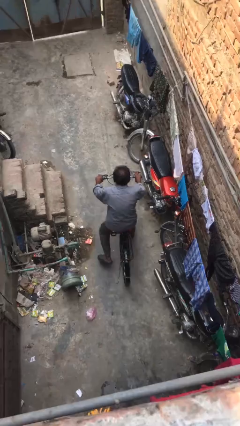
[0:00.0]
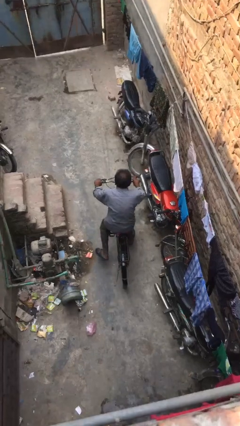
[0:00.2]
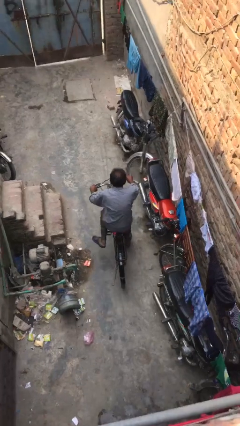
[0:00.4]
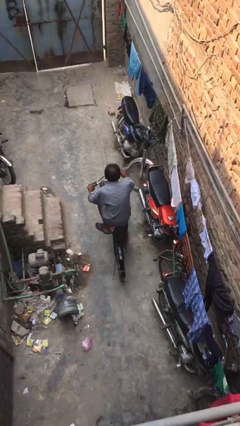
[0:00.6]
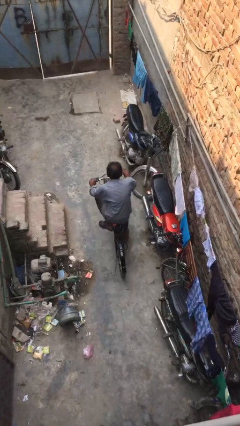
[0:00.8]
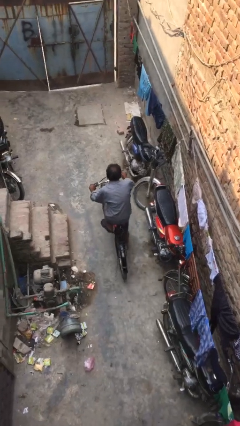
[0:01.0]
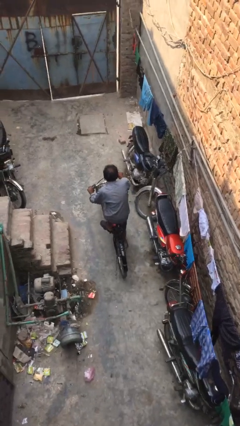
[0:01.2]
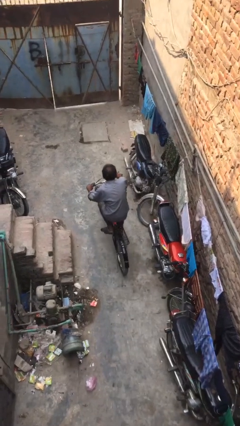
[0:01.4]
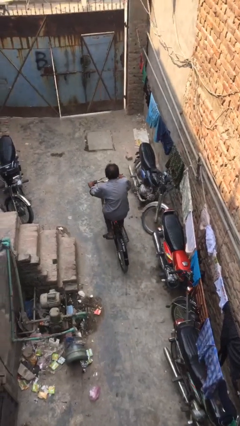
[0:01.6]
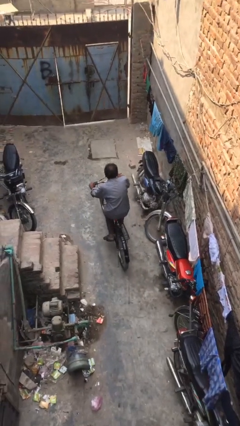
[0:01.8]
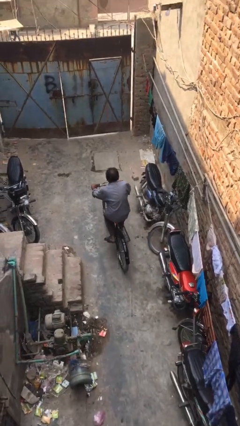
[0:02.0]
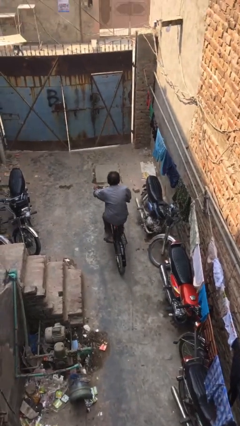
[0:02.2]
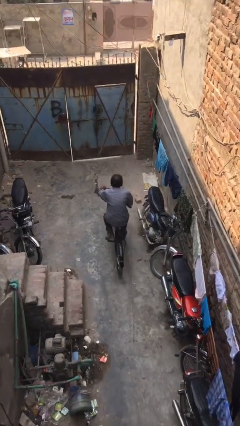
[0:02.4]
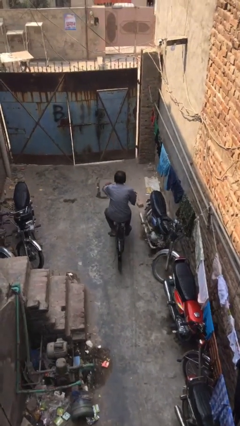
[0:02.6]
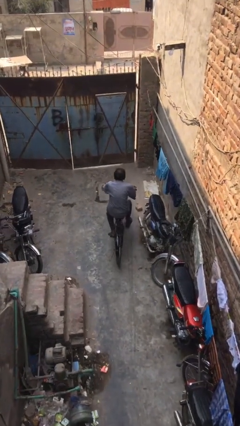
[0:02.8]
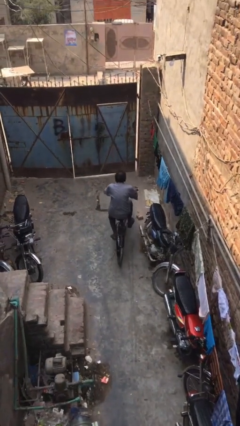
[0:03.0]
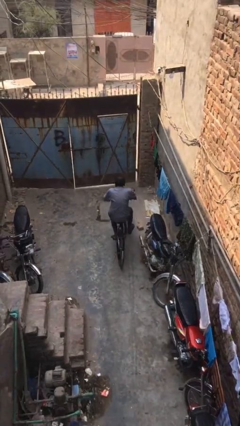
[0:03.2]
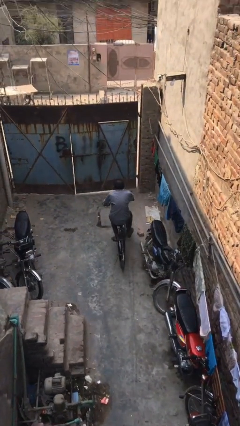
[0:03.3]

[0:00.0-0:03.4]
person rides bicycle

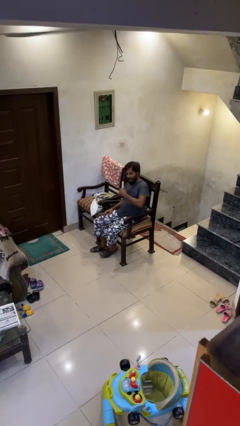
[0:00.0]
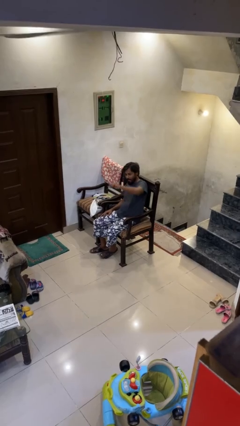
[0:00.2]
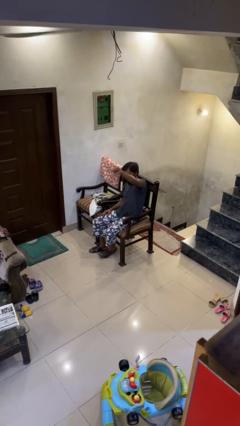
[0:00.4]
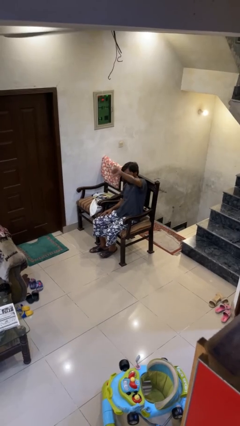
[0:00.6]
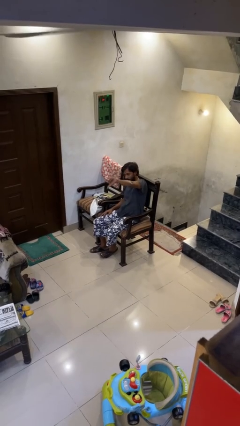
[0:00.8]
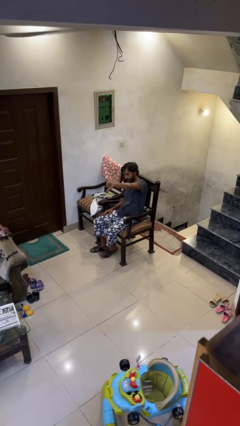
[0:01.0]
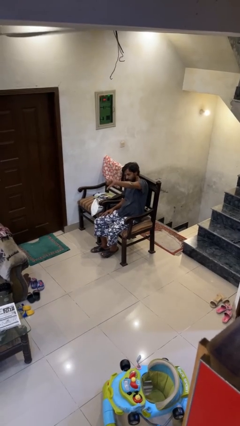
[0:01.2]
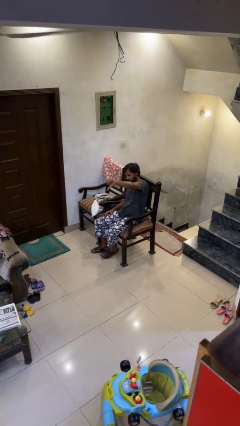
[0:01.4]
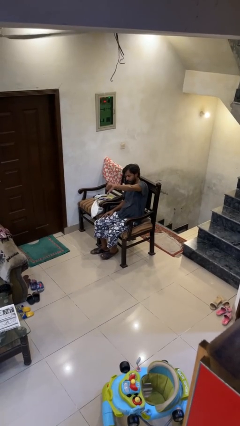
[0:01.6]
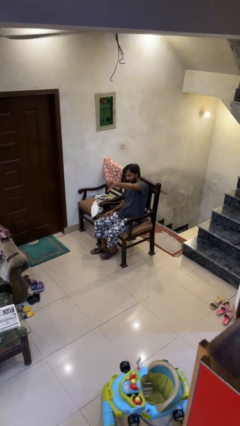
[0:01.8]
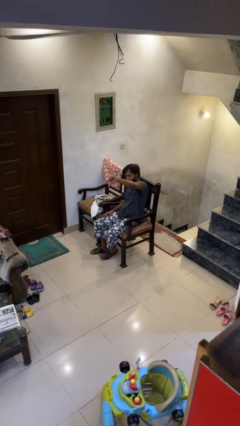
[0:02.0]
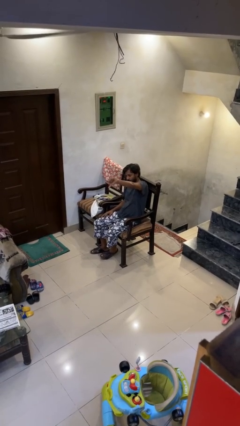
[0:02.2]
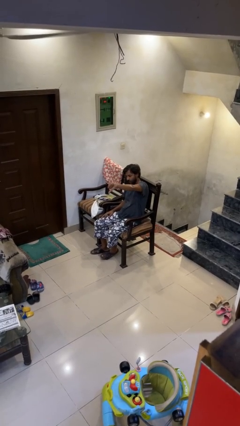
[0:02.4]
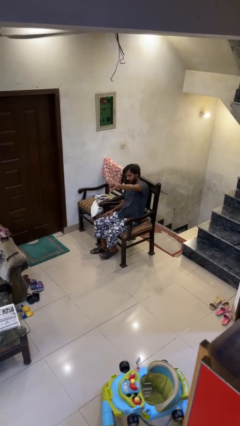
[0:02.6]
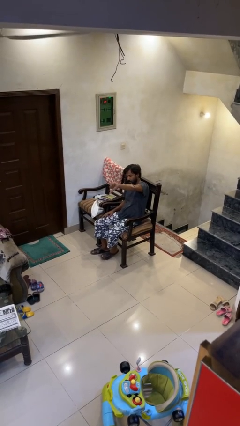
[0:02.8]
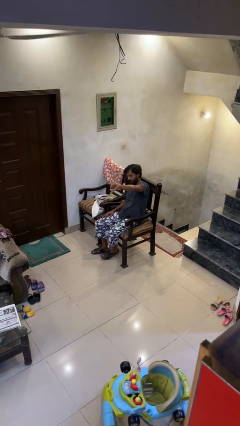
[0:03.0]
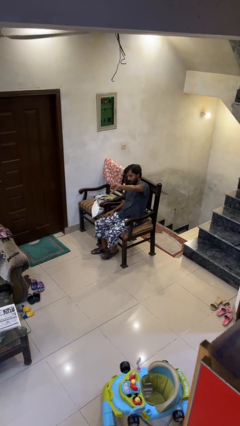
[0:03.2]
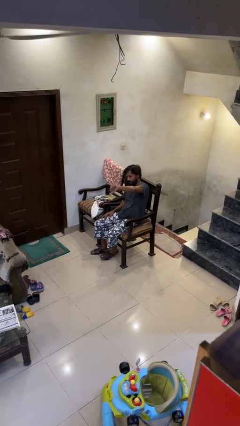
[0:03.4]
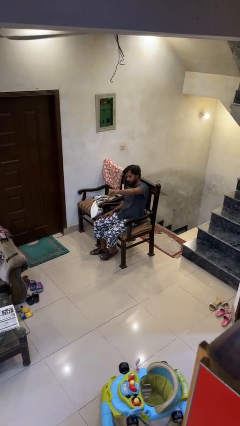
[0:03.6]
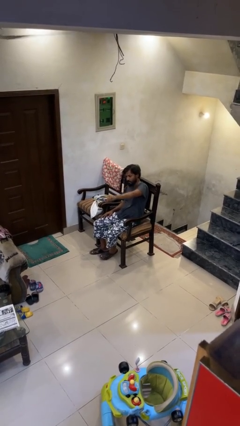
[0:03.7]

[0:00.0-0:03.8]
person gestures thumbs down

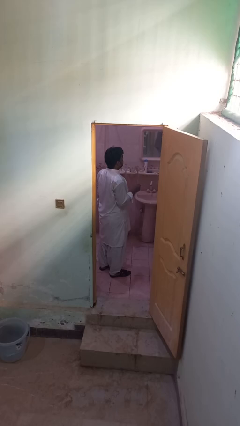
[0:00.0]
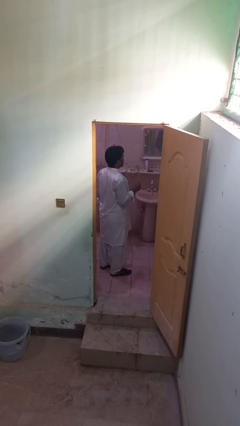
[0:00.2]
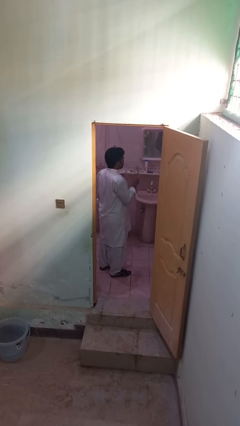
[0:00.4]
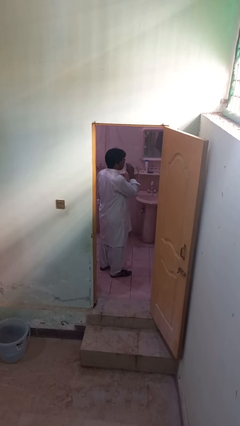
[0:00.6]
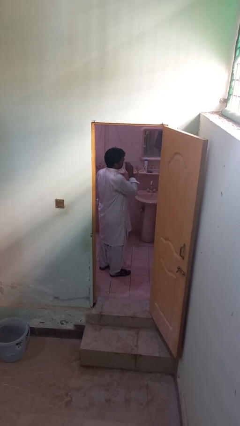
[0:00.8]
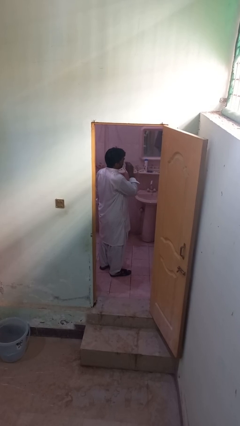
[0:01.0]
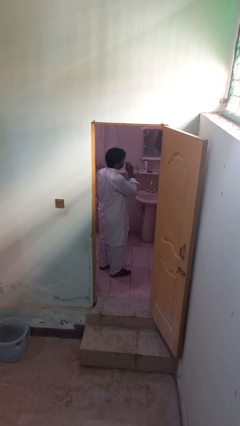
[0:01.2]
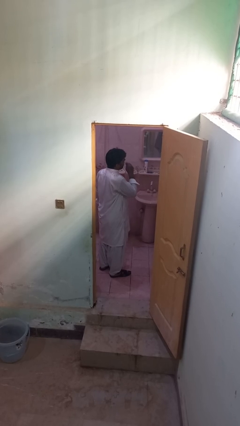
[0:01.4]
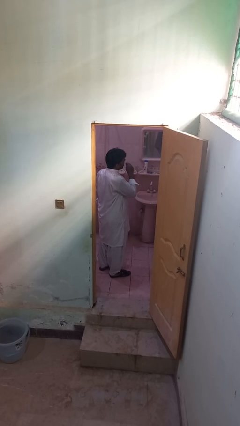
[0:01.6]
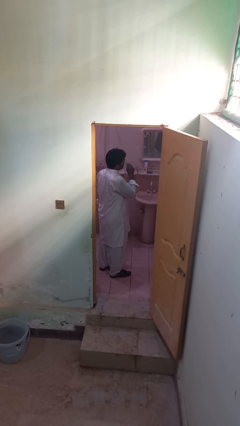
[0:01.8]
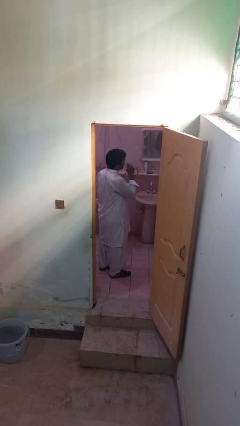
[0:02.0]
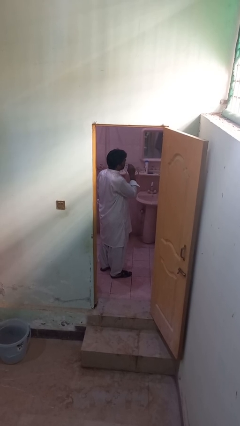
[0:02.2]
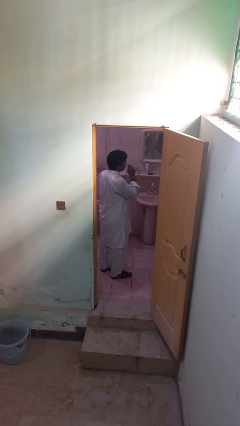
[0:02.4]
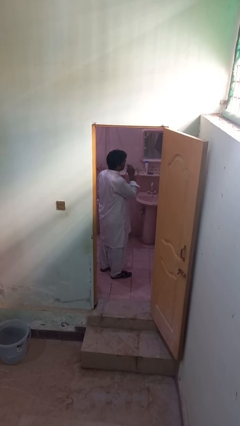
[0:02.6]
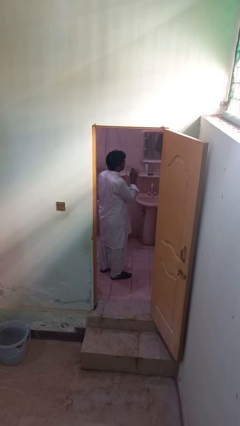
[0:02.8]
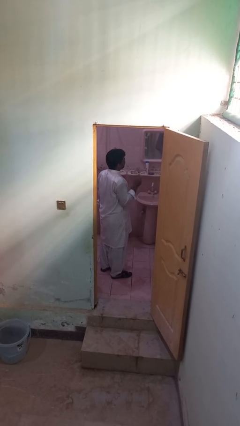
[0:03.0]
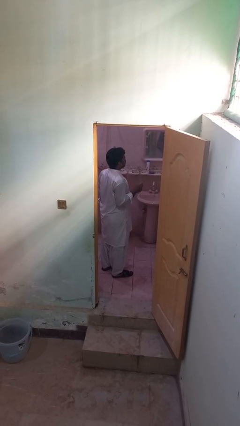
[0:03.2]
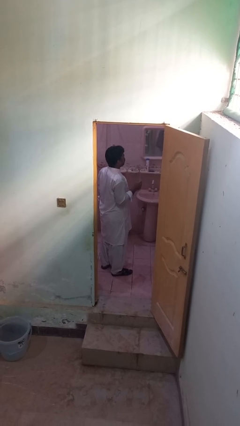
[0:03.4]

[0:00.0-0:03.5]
person flosses

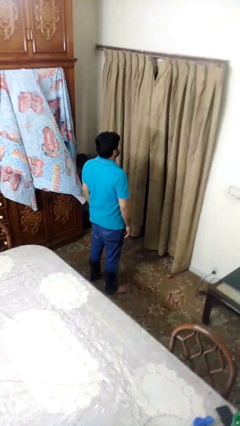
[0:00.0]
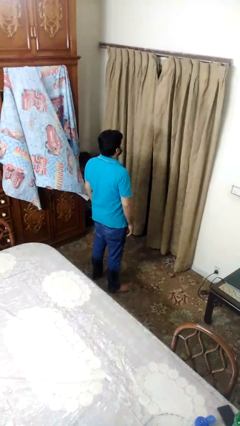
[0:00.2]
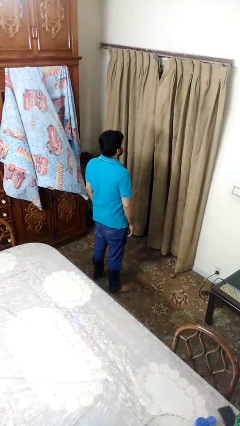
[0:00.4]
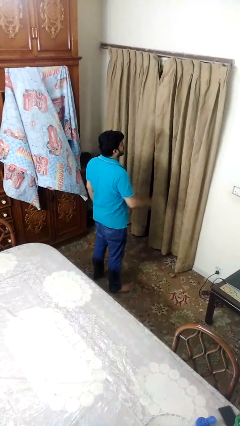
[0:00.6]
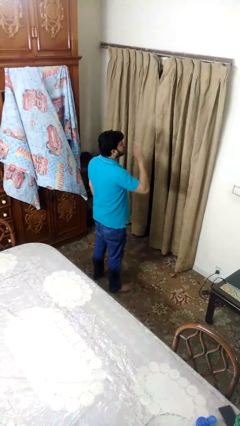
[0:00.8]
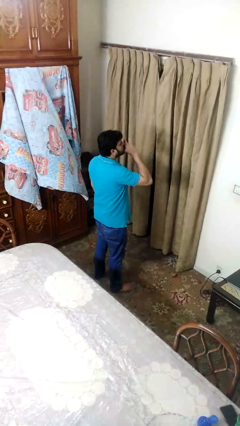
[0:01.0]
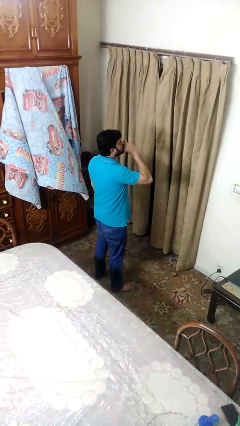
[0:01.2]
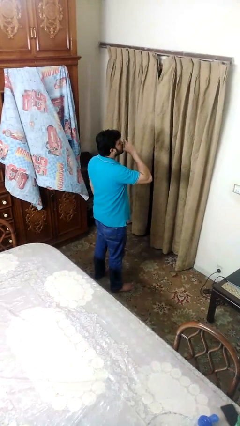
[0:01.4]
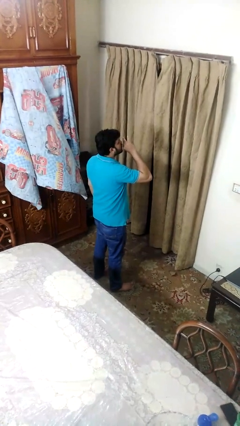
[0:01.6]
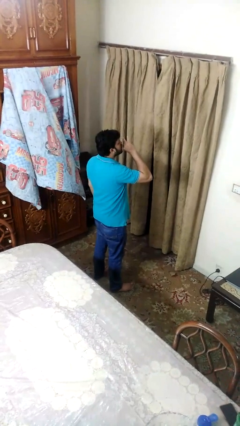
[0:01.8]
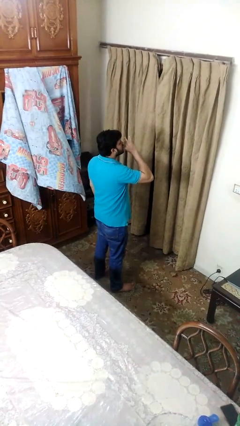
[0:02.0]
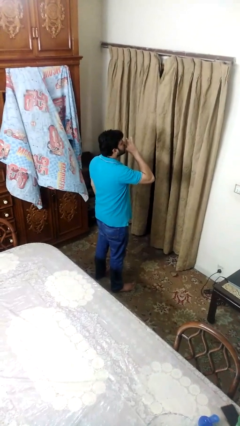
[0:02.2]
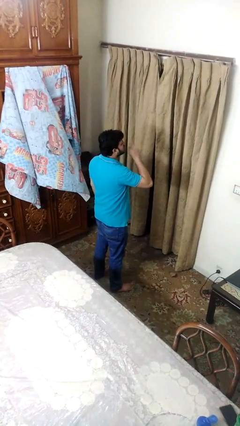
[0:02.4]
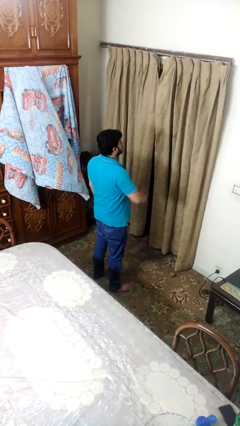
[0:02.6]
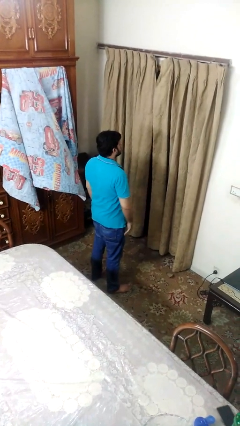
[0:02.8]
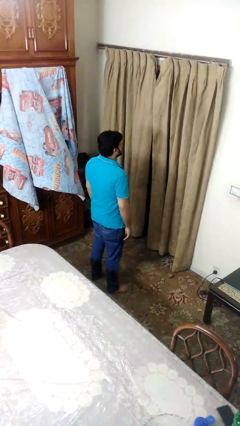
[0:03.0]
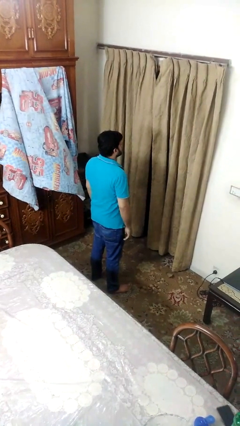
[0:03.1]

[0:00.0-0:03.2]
person yawns

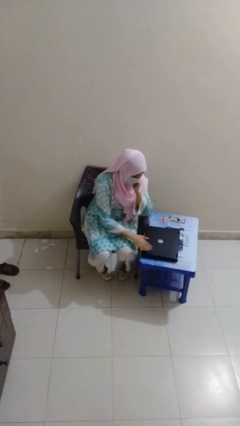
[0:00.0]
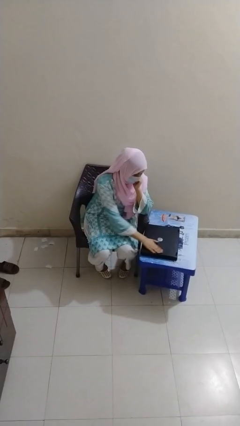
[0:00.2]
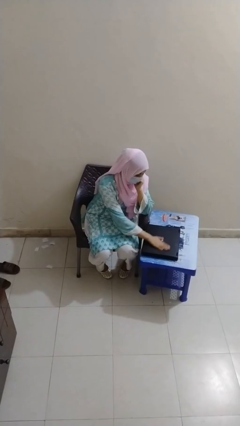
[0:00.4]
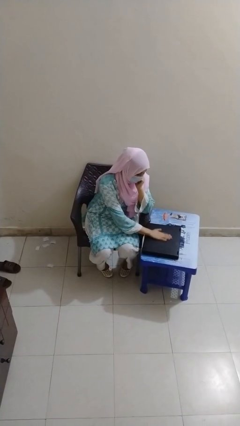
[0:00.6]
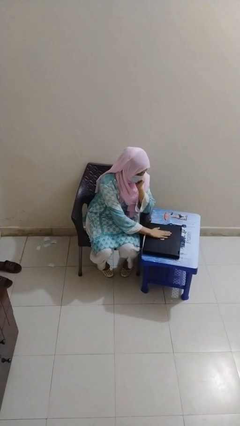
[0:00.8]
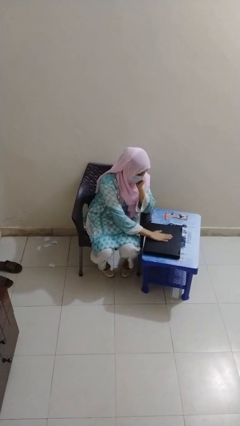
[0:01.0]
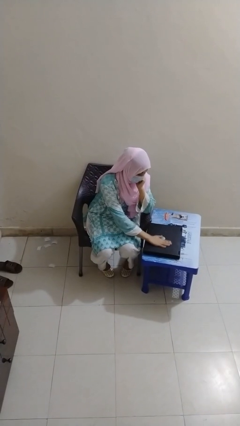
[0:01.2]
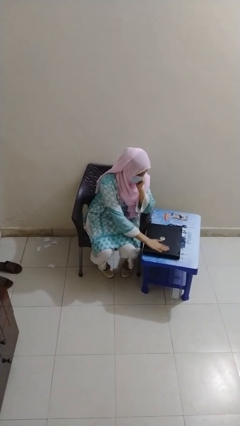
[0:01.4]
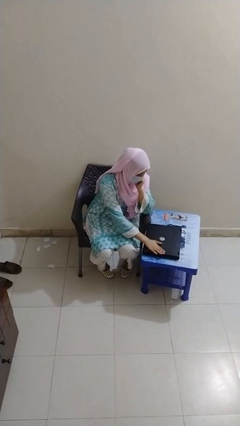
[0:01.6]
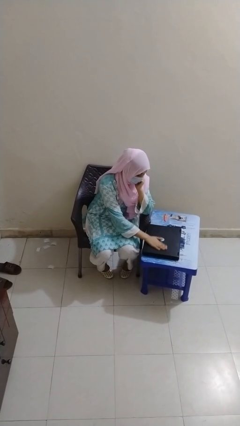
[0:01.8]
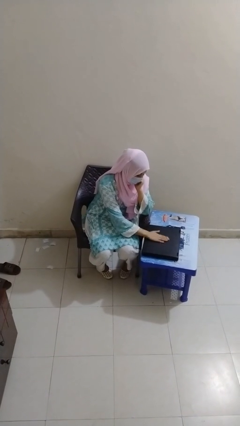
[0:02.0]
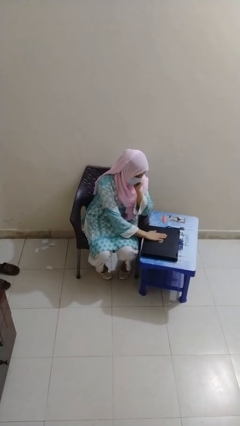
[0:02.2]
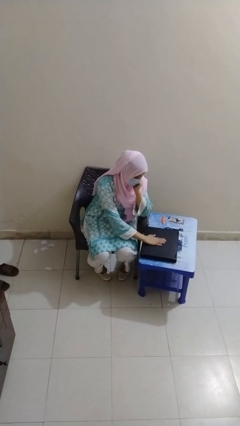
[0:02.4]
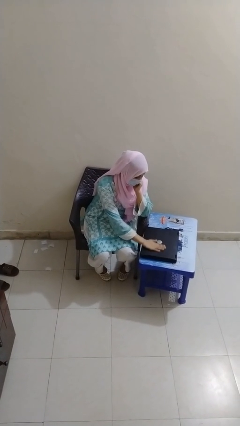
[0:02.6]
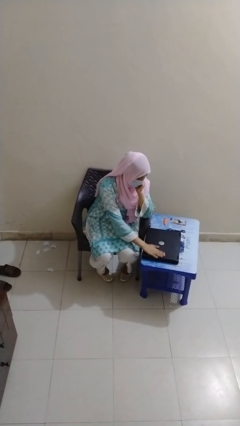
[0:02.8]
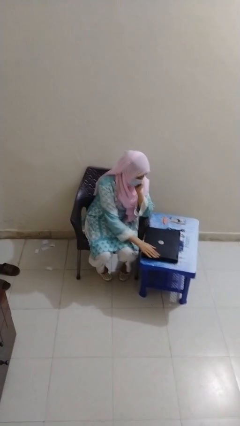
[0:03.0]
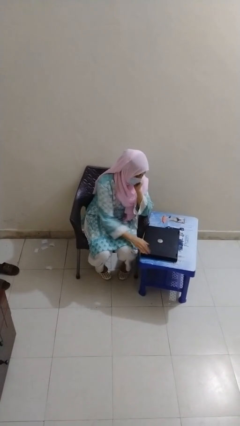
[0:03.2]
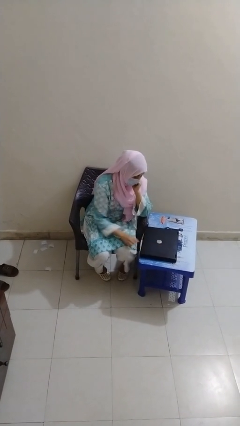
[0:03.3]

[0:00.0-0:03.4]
person waves hand over object

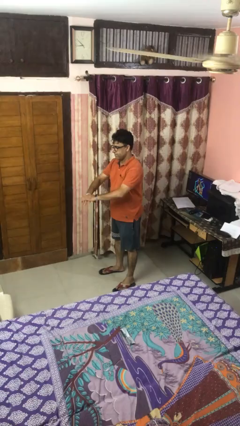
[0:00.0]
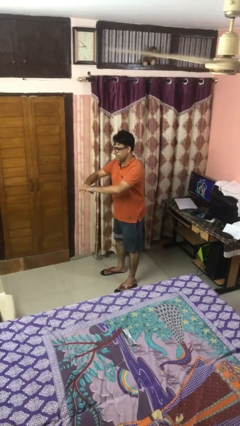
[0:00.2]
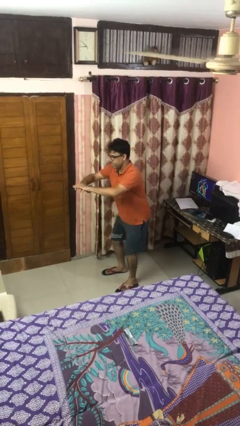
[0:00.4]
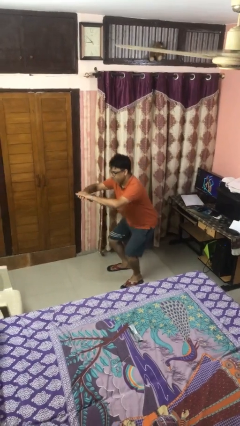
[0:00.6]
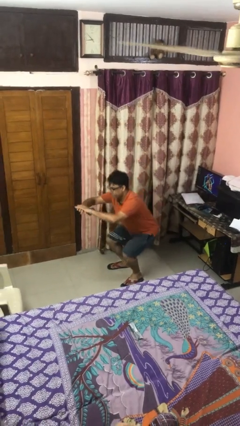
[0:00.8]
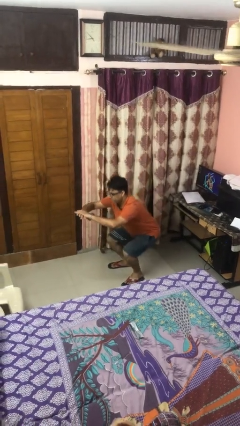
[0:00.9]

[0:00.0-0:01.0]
person squats
